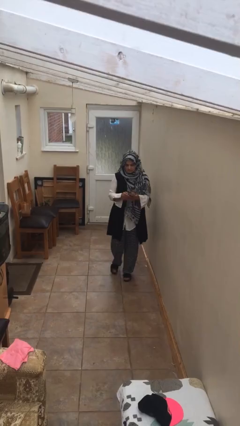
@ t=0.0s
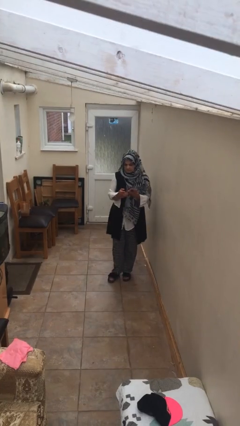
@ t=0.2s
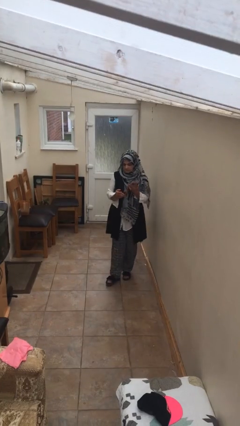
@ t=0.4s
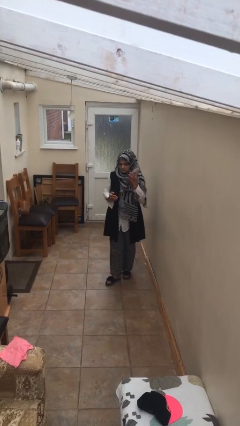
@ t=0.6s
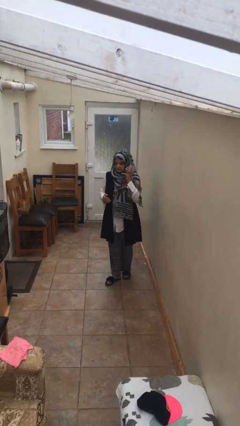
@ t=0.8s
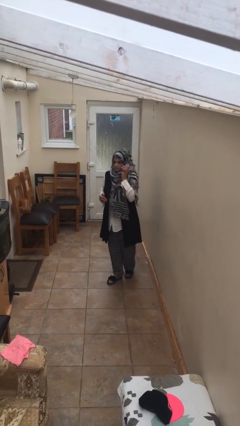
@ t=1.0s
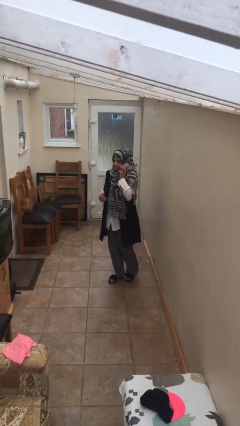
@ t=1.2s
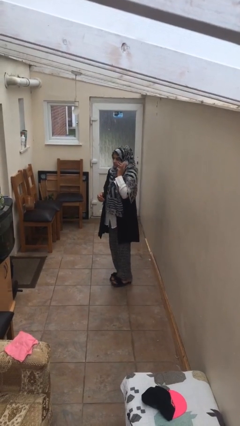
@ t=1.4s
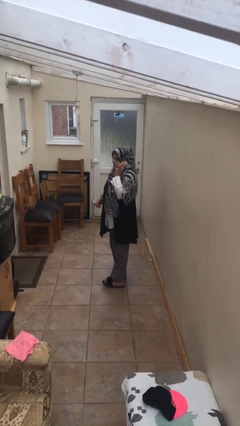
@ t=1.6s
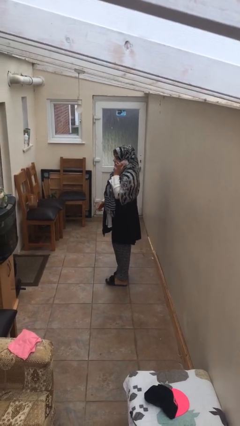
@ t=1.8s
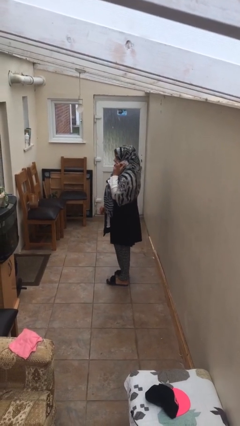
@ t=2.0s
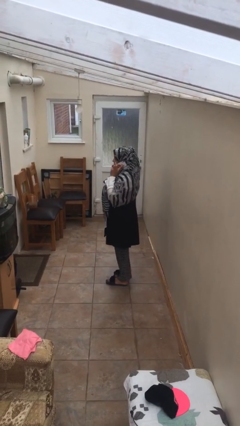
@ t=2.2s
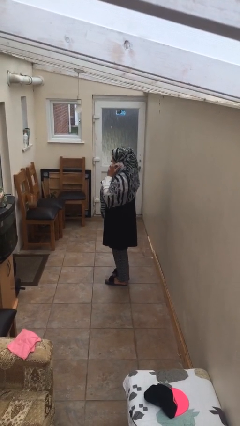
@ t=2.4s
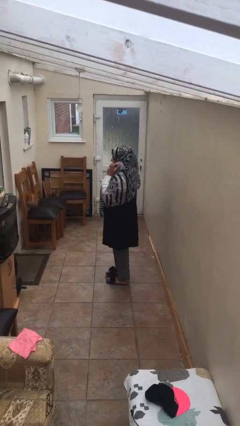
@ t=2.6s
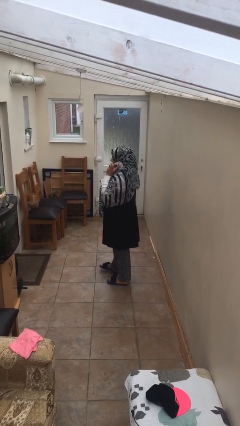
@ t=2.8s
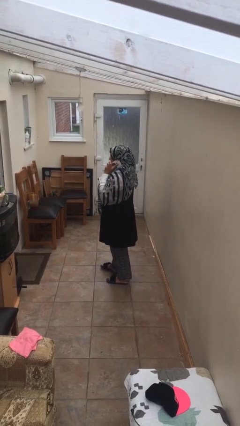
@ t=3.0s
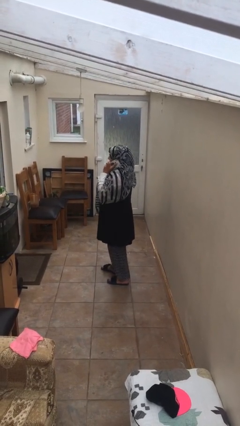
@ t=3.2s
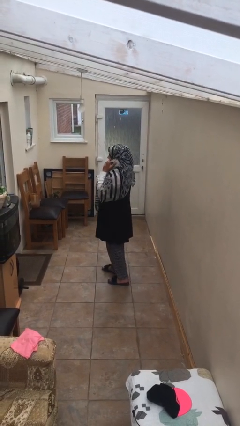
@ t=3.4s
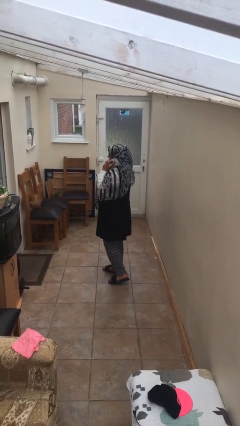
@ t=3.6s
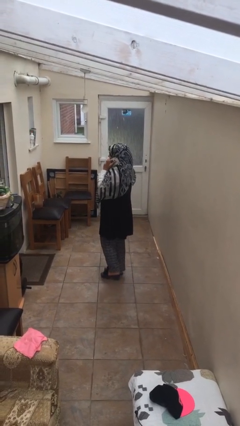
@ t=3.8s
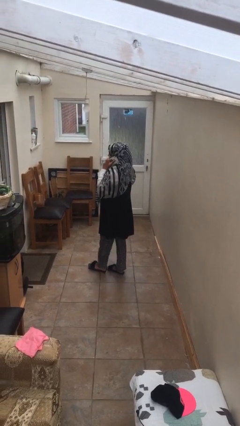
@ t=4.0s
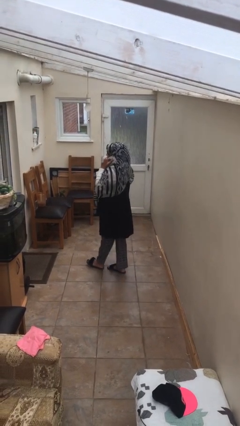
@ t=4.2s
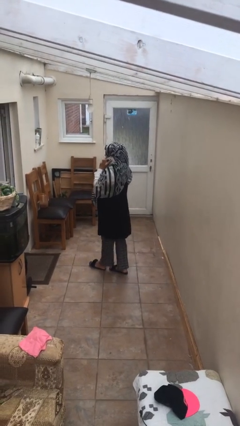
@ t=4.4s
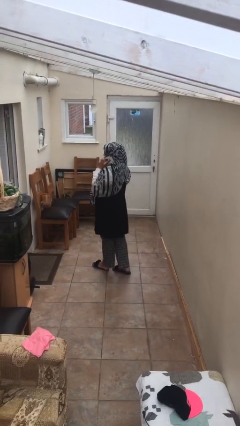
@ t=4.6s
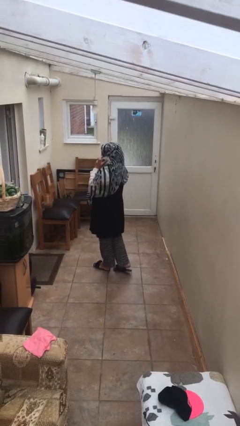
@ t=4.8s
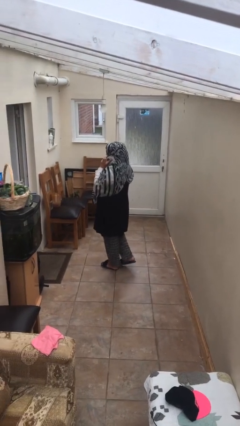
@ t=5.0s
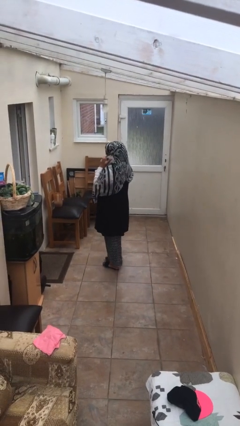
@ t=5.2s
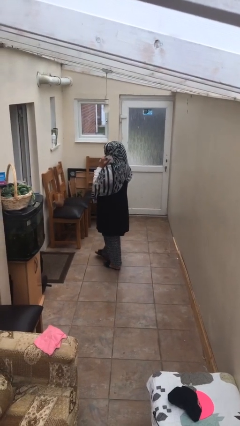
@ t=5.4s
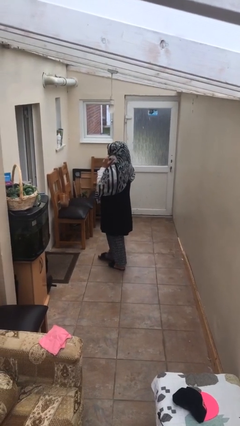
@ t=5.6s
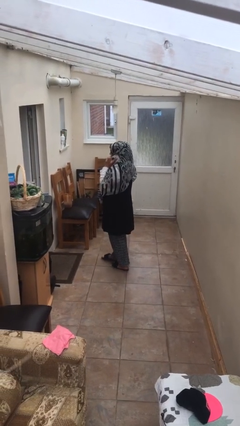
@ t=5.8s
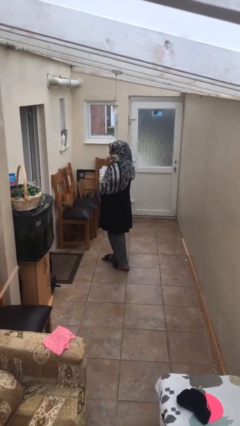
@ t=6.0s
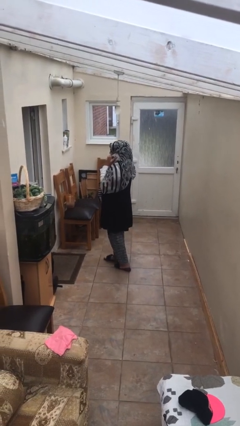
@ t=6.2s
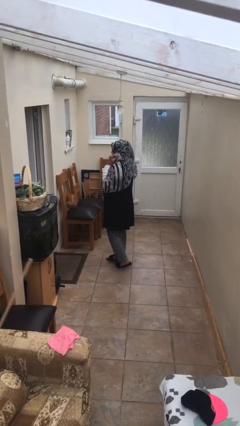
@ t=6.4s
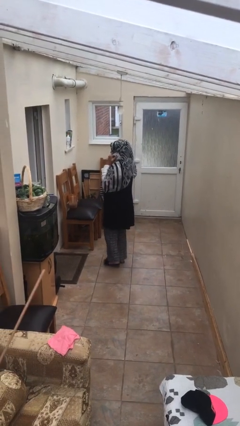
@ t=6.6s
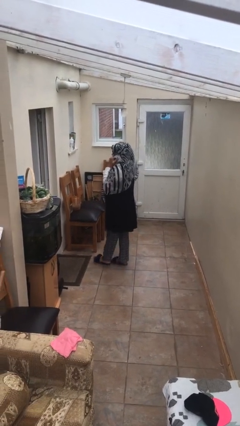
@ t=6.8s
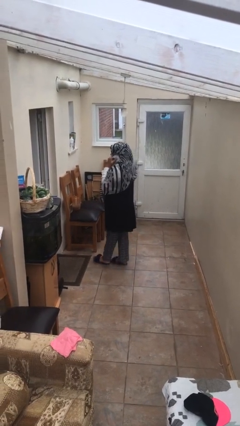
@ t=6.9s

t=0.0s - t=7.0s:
person talks on phone

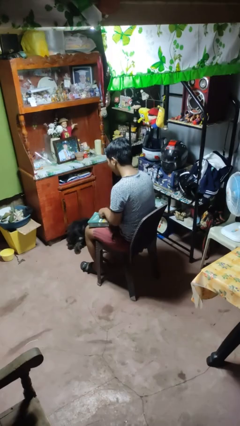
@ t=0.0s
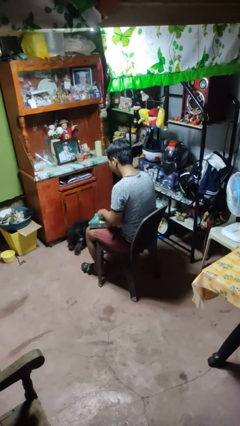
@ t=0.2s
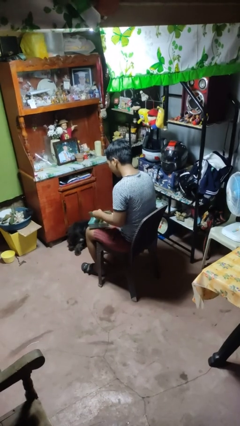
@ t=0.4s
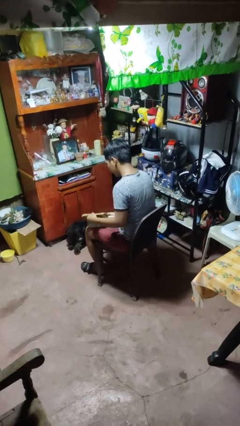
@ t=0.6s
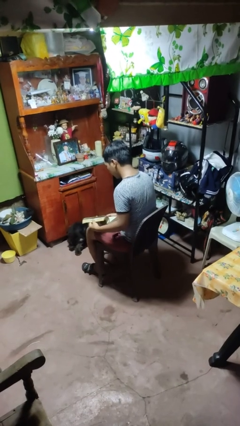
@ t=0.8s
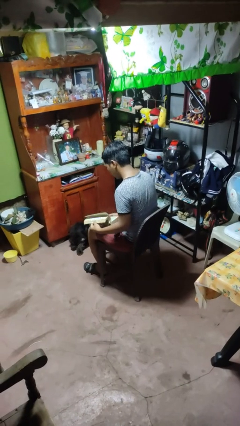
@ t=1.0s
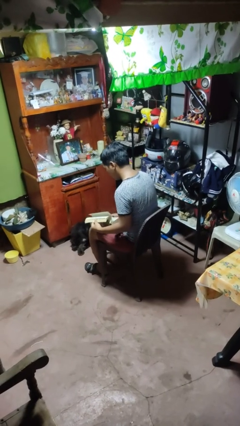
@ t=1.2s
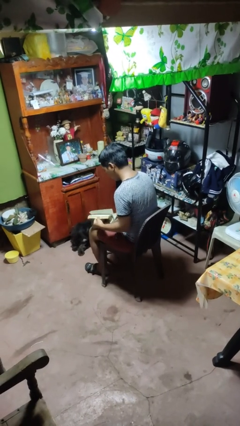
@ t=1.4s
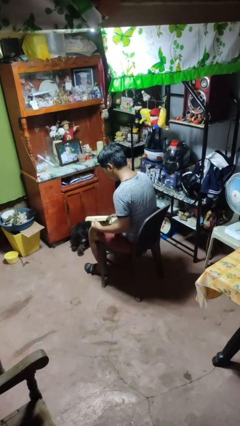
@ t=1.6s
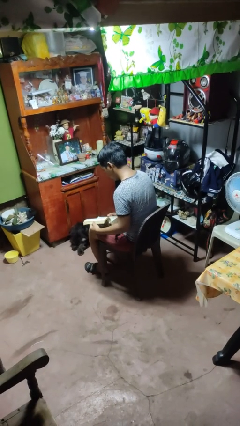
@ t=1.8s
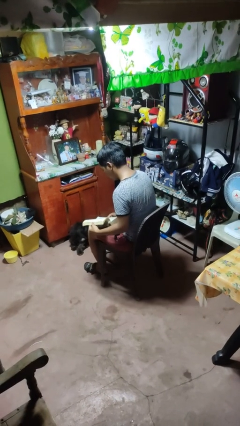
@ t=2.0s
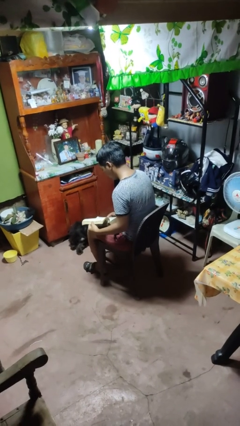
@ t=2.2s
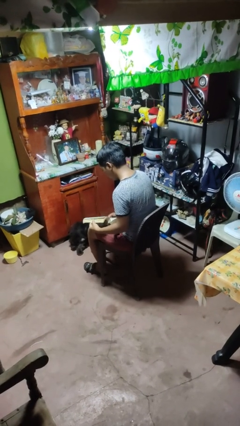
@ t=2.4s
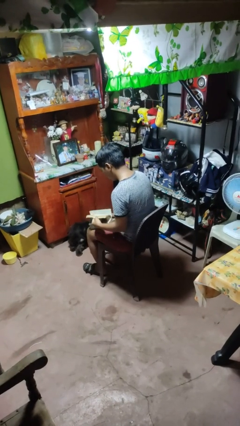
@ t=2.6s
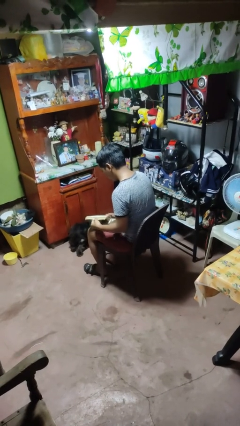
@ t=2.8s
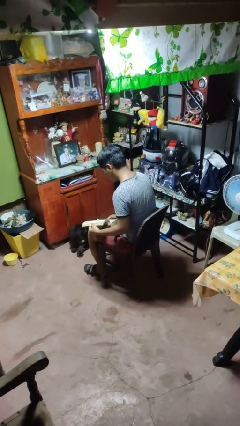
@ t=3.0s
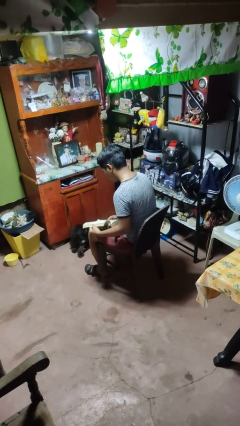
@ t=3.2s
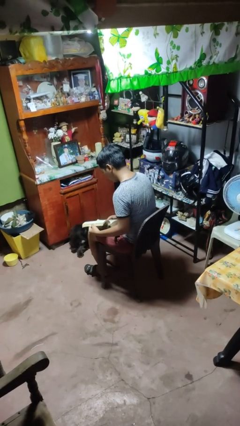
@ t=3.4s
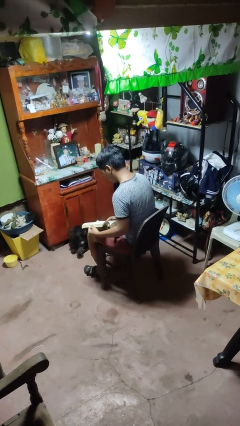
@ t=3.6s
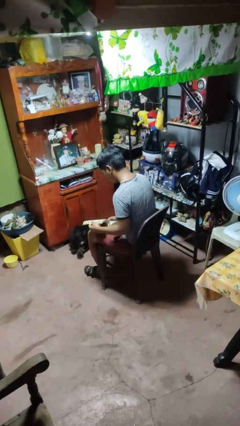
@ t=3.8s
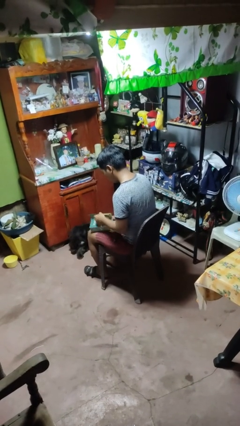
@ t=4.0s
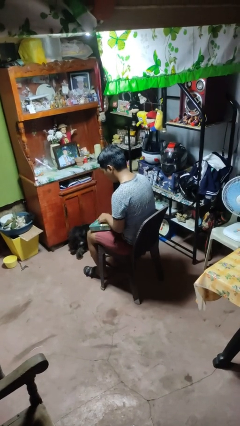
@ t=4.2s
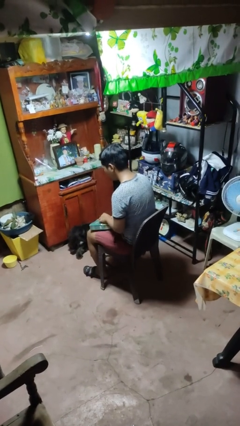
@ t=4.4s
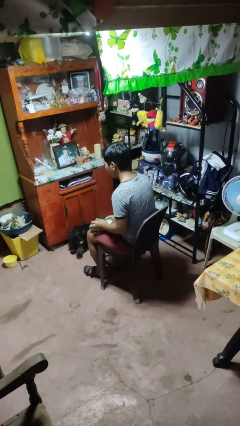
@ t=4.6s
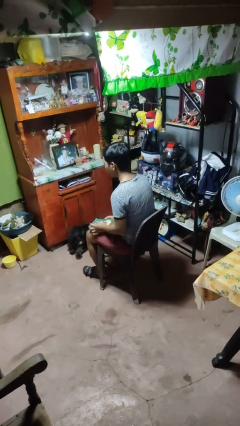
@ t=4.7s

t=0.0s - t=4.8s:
person reads book

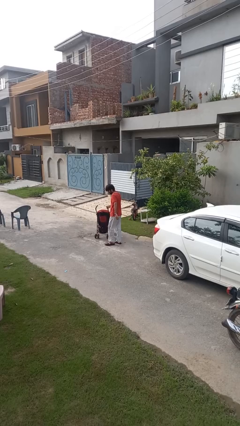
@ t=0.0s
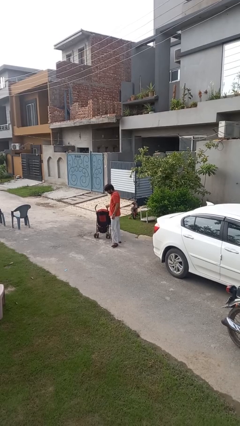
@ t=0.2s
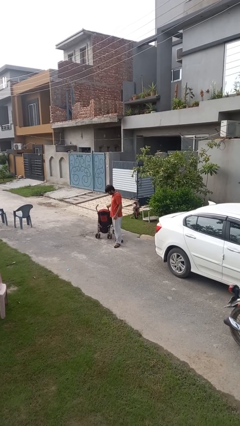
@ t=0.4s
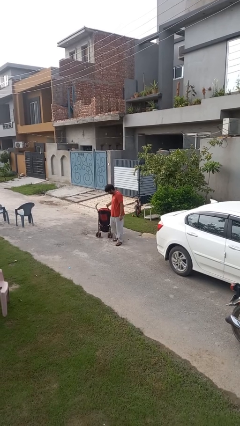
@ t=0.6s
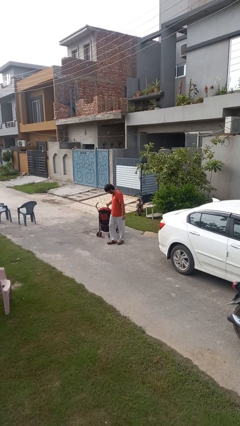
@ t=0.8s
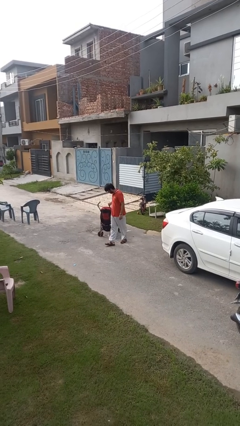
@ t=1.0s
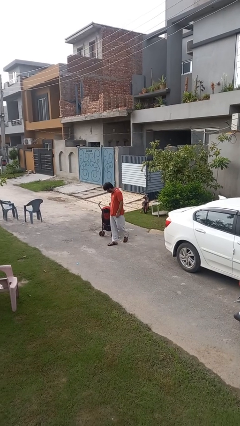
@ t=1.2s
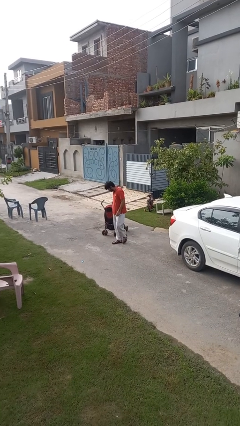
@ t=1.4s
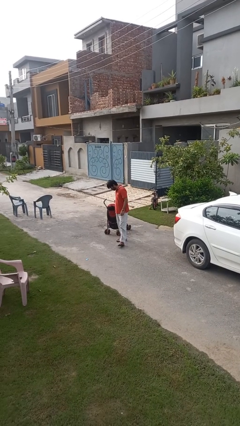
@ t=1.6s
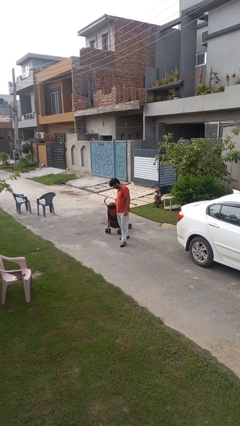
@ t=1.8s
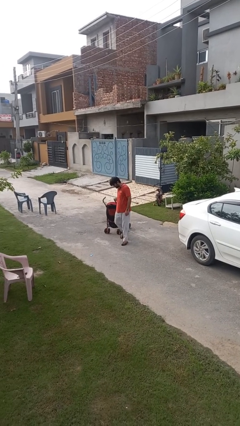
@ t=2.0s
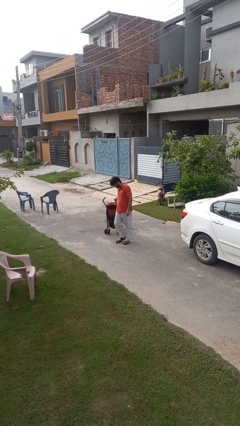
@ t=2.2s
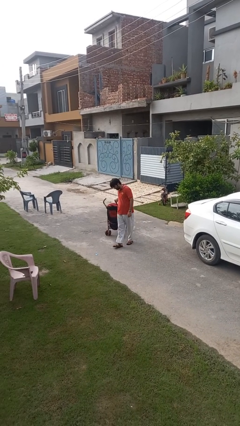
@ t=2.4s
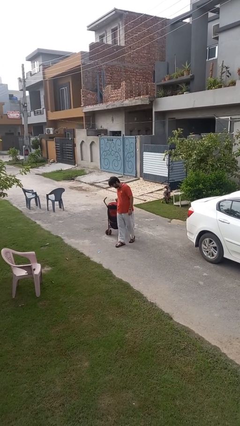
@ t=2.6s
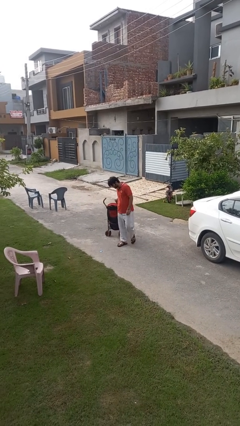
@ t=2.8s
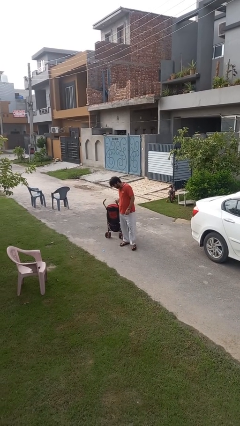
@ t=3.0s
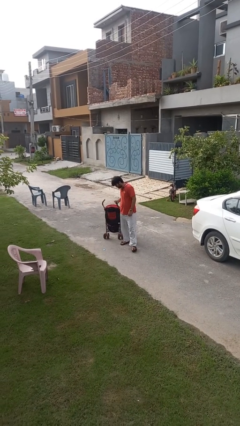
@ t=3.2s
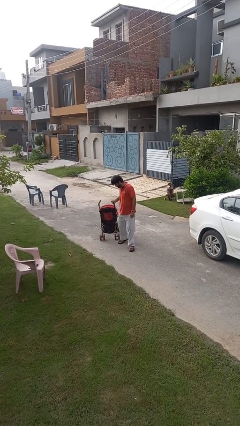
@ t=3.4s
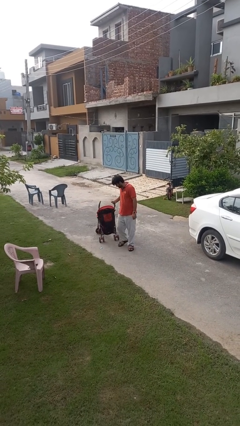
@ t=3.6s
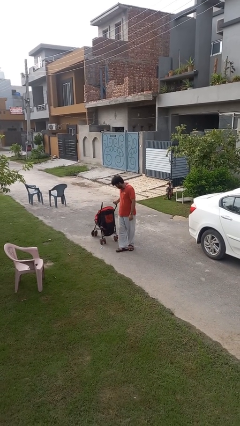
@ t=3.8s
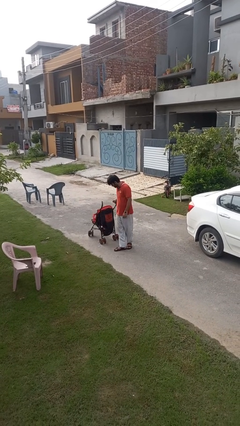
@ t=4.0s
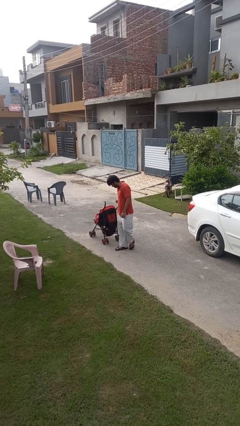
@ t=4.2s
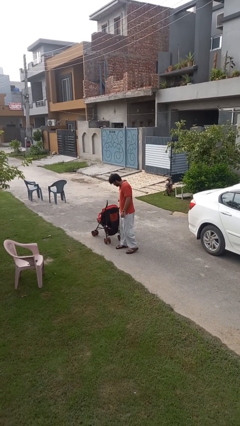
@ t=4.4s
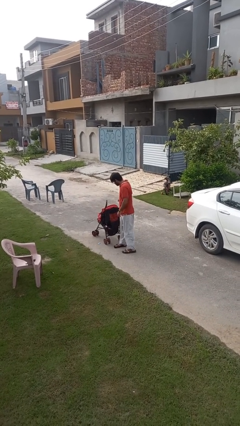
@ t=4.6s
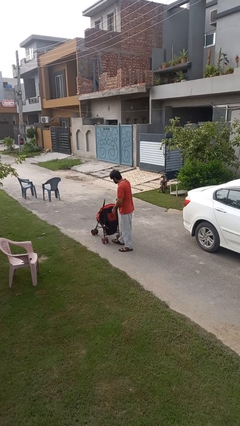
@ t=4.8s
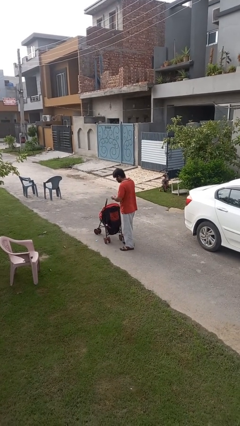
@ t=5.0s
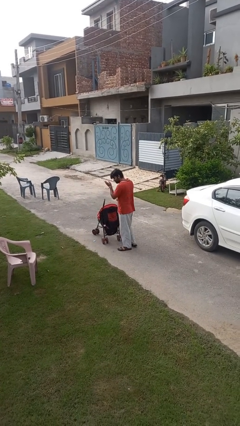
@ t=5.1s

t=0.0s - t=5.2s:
person pulls wheeled cart

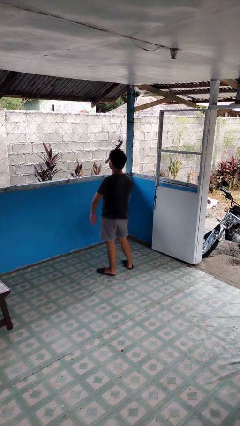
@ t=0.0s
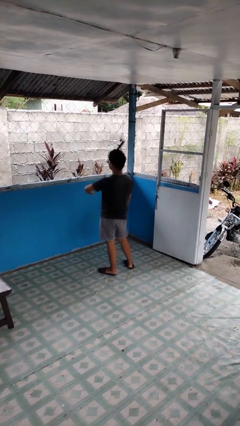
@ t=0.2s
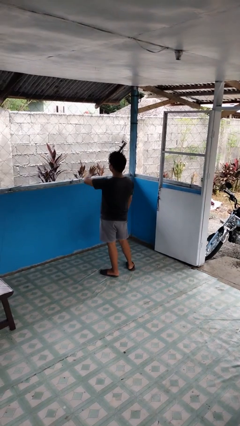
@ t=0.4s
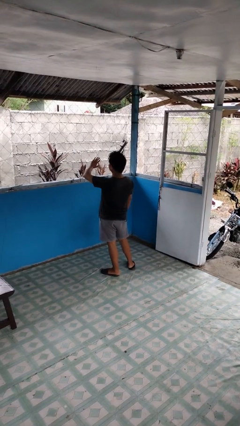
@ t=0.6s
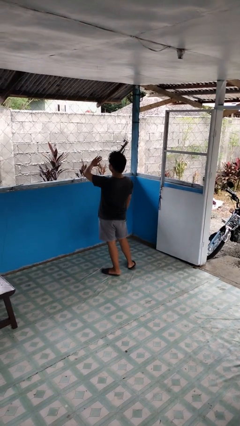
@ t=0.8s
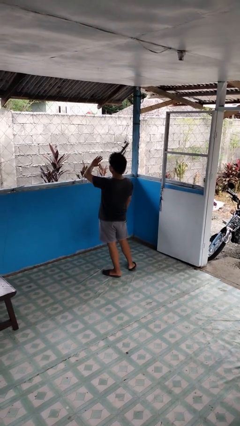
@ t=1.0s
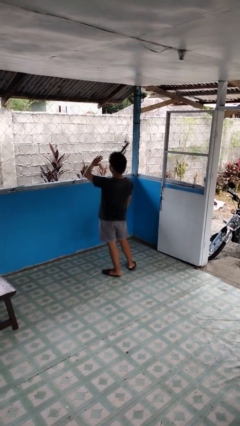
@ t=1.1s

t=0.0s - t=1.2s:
person gestures swipe up
